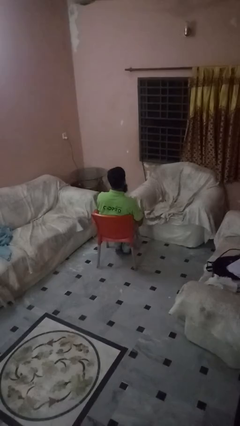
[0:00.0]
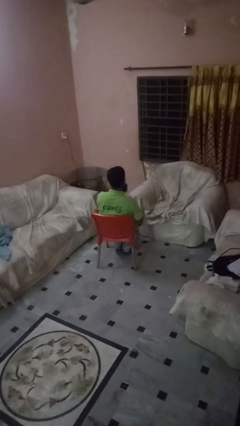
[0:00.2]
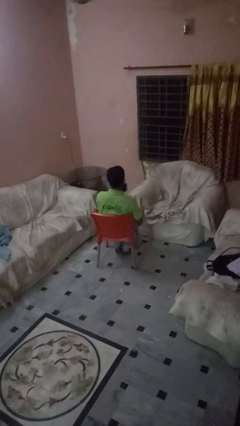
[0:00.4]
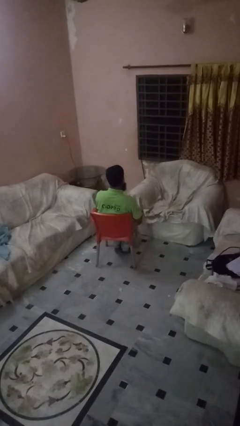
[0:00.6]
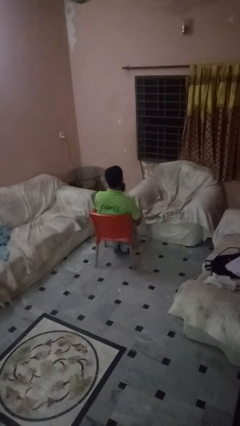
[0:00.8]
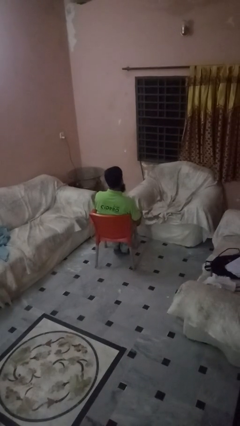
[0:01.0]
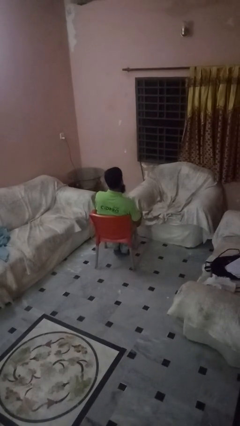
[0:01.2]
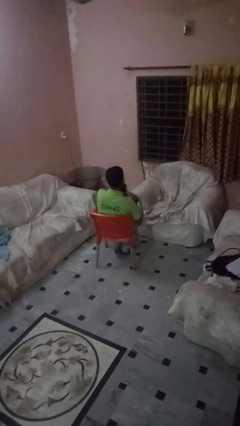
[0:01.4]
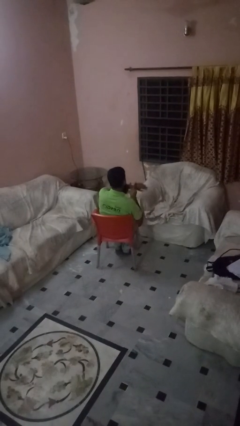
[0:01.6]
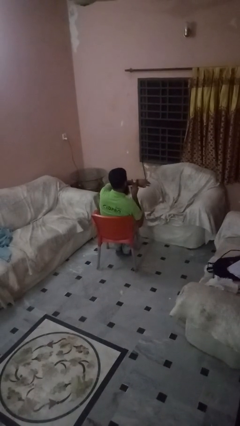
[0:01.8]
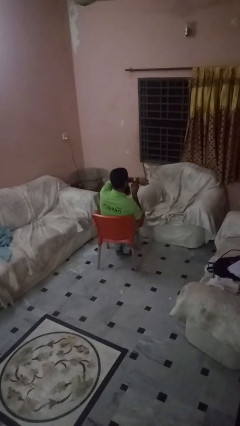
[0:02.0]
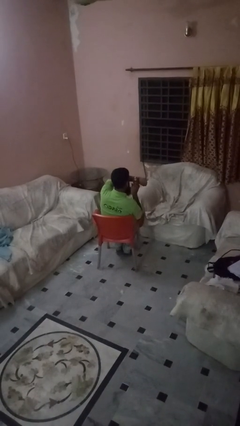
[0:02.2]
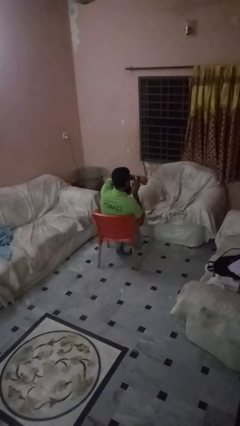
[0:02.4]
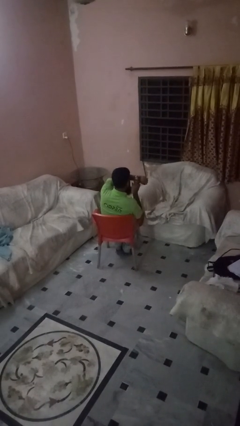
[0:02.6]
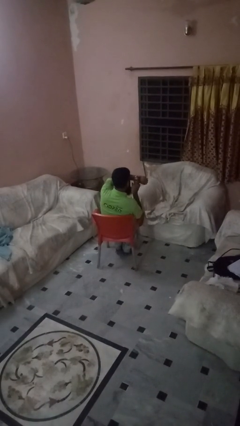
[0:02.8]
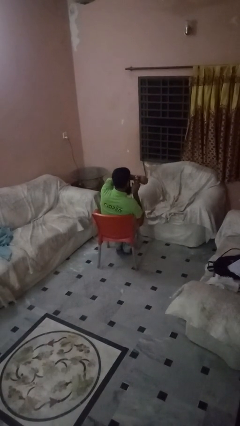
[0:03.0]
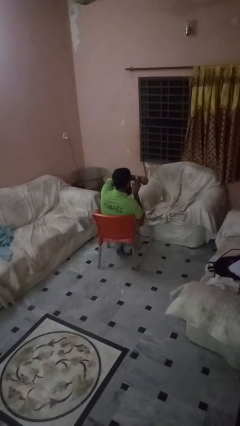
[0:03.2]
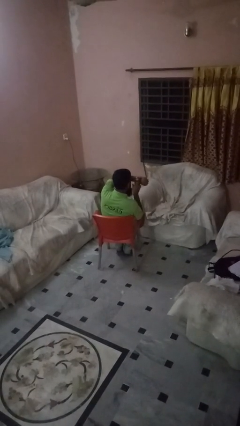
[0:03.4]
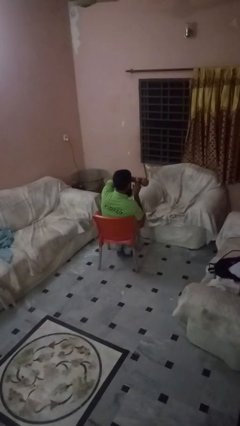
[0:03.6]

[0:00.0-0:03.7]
person gestures watch closely

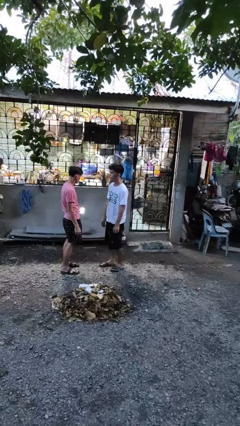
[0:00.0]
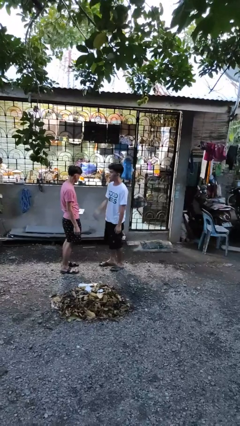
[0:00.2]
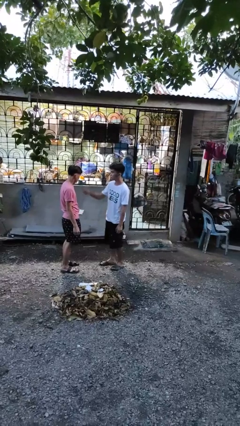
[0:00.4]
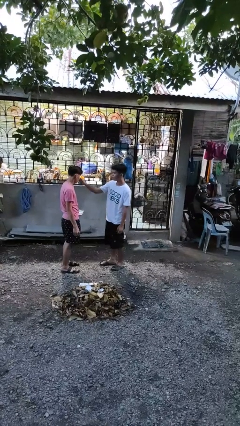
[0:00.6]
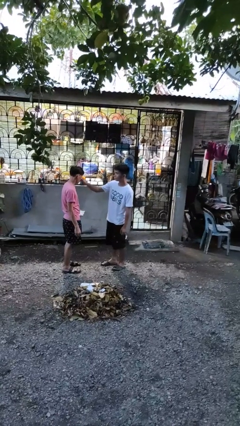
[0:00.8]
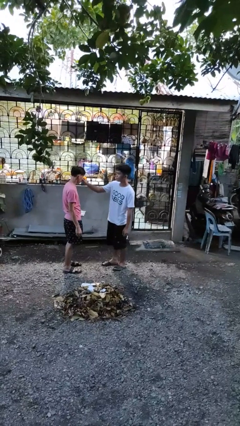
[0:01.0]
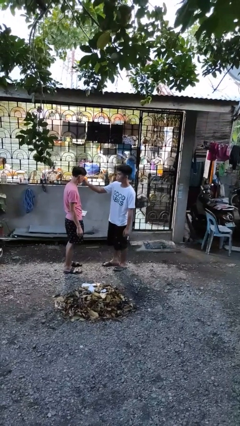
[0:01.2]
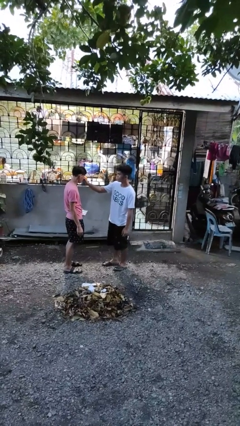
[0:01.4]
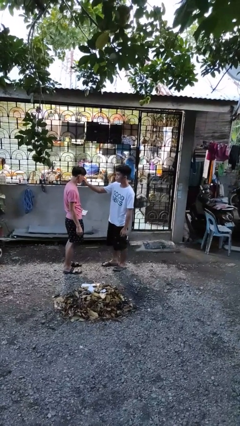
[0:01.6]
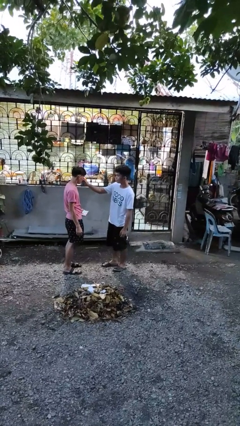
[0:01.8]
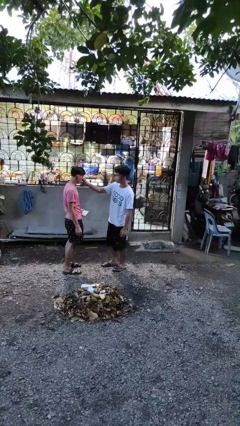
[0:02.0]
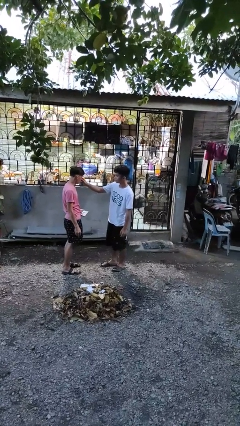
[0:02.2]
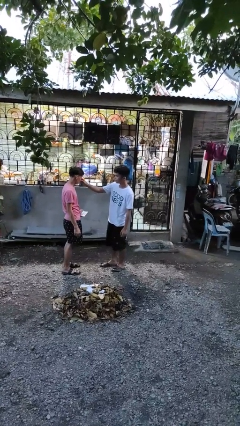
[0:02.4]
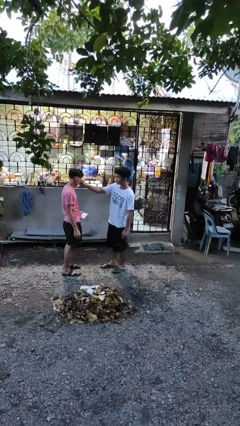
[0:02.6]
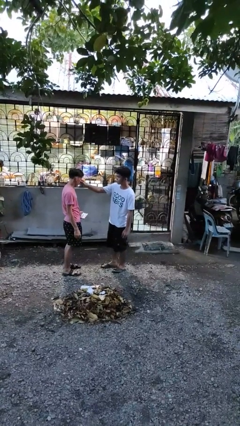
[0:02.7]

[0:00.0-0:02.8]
person touches face of person

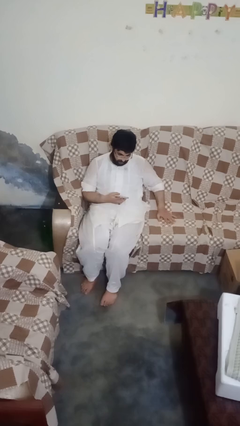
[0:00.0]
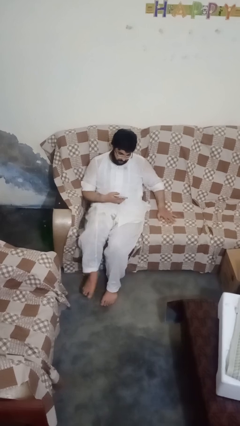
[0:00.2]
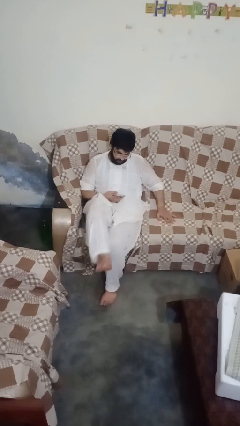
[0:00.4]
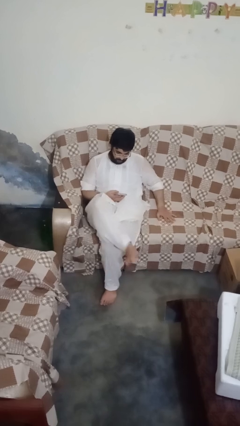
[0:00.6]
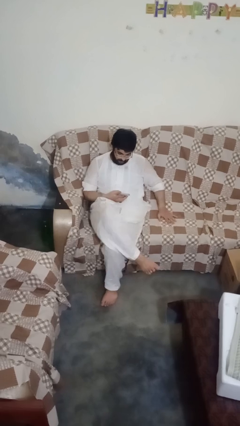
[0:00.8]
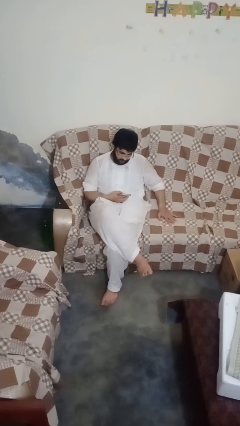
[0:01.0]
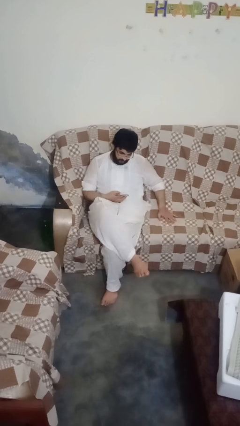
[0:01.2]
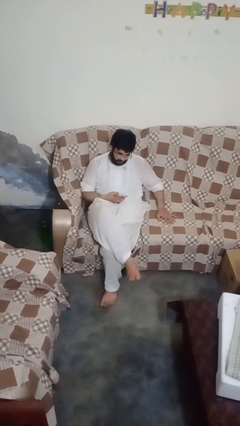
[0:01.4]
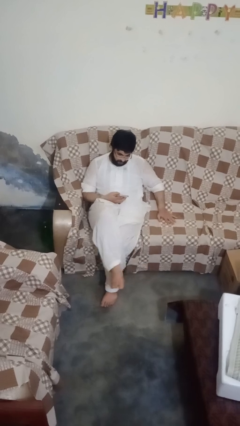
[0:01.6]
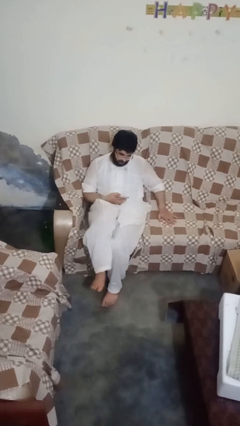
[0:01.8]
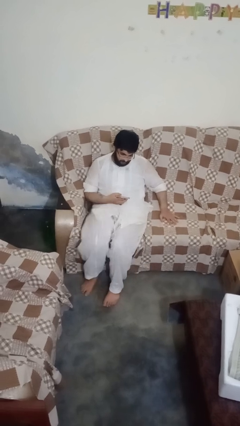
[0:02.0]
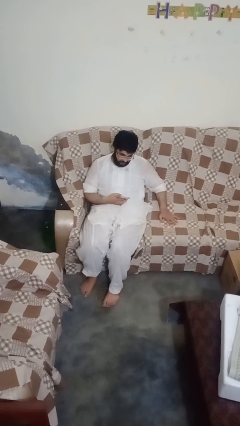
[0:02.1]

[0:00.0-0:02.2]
person crosses legs

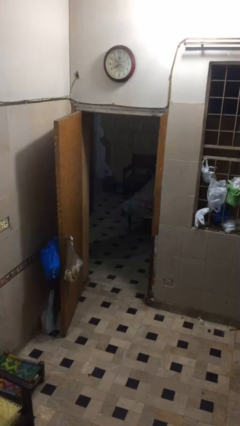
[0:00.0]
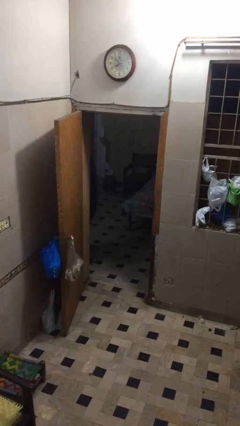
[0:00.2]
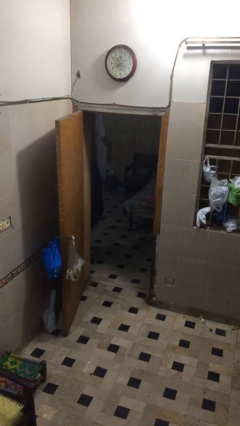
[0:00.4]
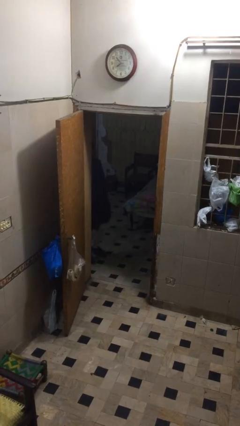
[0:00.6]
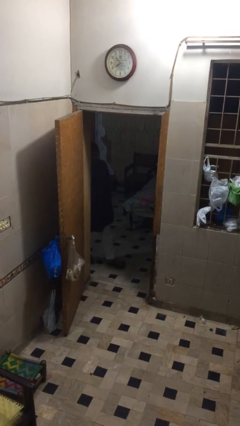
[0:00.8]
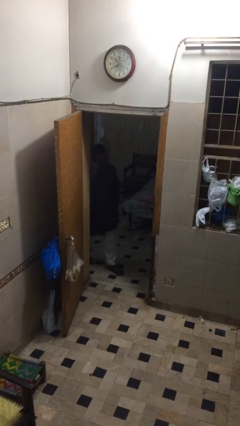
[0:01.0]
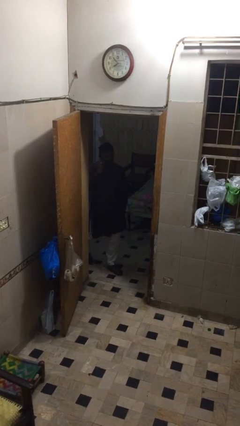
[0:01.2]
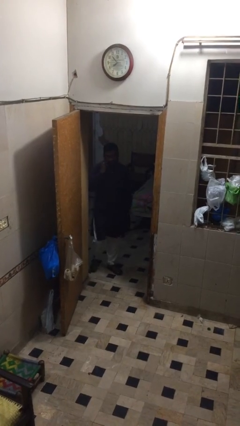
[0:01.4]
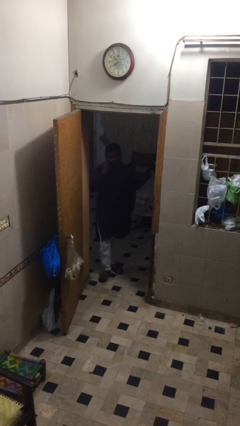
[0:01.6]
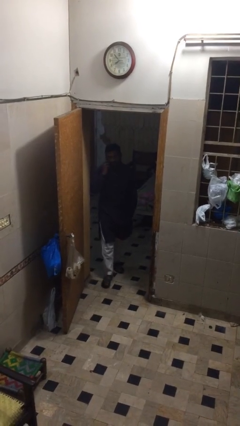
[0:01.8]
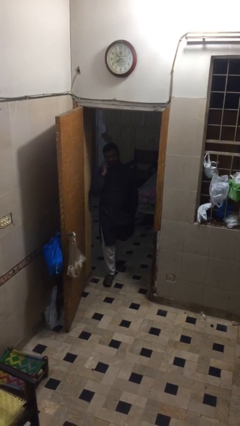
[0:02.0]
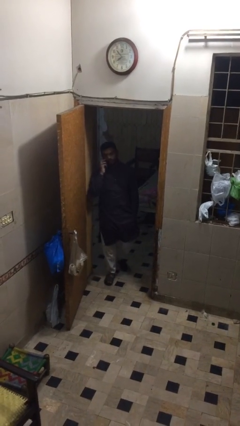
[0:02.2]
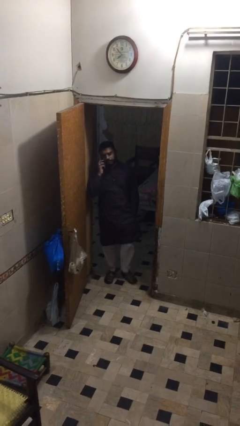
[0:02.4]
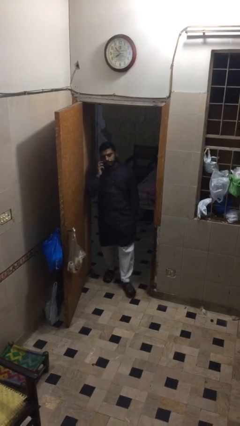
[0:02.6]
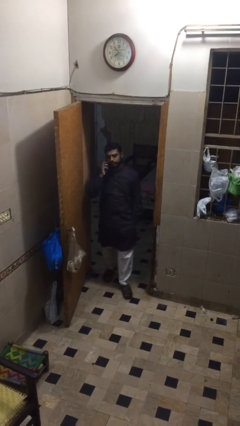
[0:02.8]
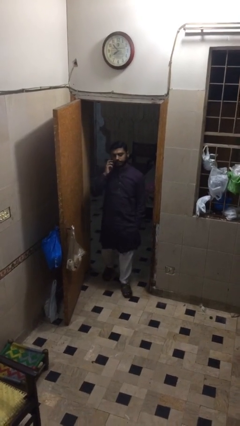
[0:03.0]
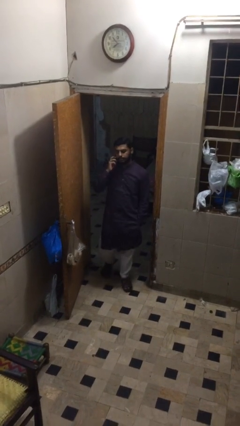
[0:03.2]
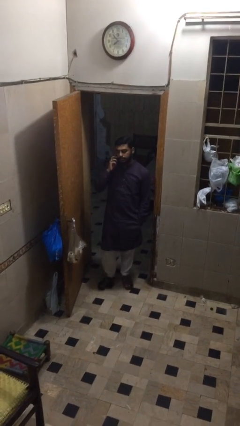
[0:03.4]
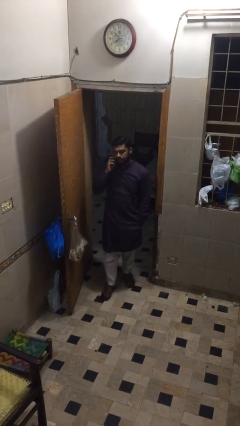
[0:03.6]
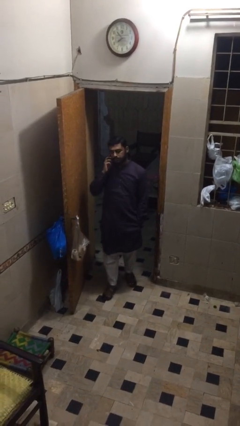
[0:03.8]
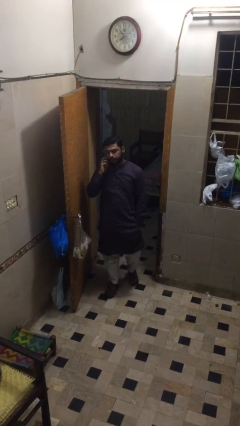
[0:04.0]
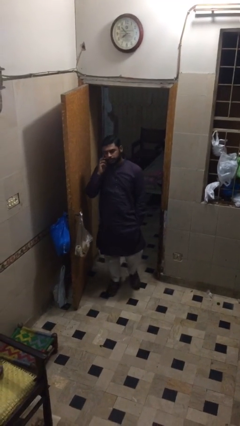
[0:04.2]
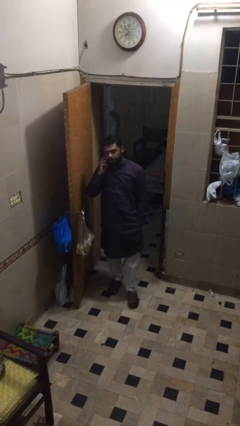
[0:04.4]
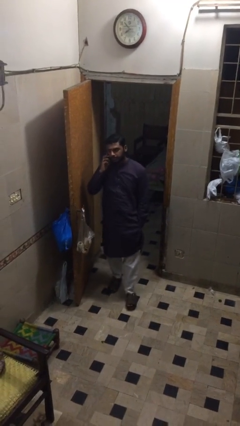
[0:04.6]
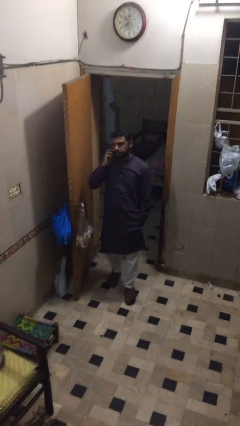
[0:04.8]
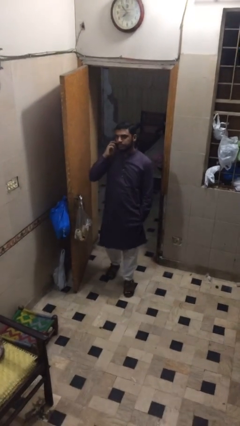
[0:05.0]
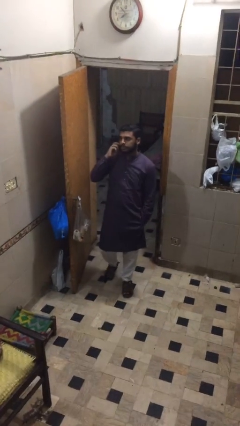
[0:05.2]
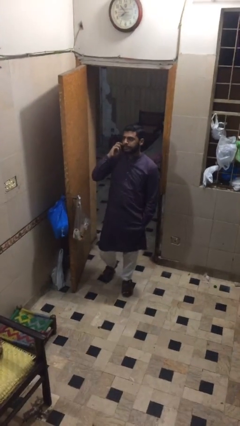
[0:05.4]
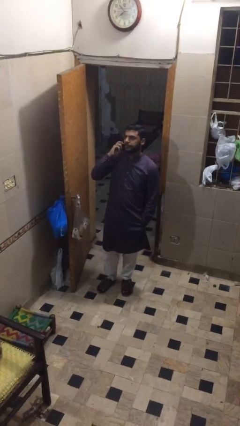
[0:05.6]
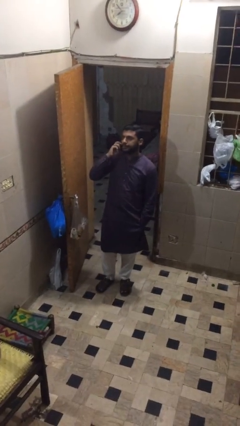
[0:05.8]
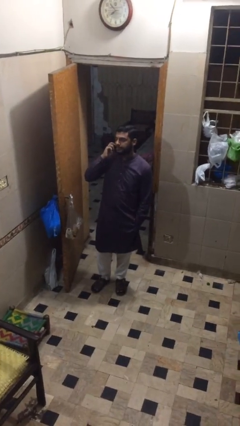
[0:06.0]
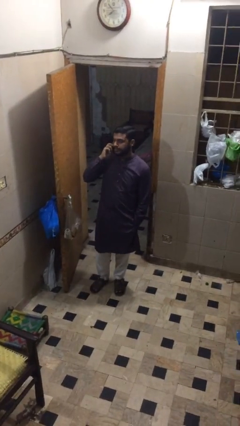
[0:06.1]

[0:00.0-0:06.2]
person enters scene through structure

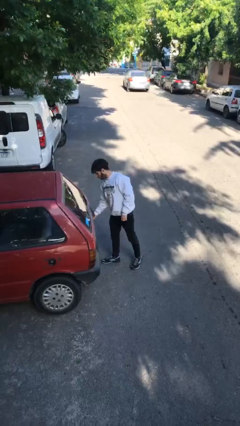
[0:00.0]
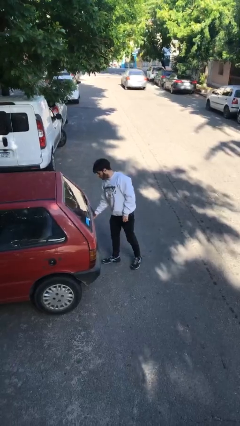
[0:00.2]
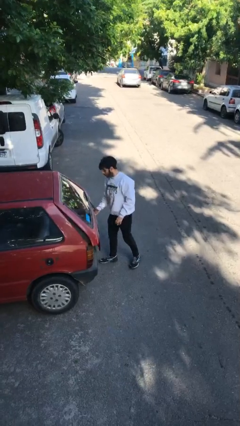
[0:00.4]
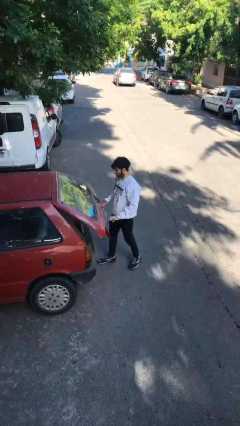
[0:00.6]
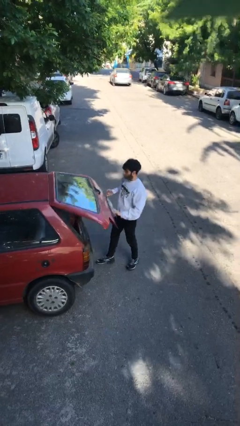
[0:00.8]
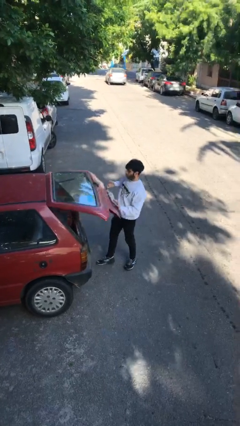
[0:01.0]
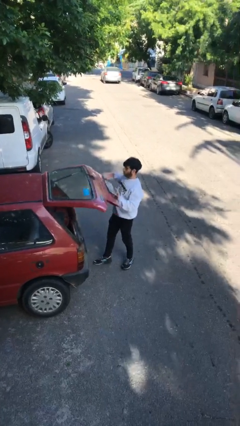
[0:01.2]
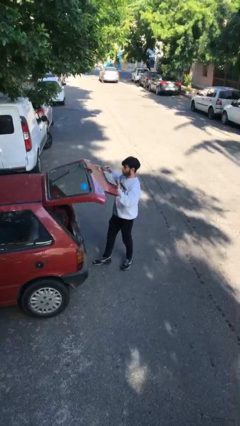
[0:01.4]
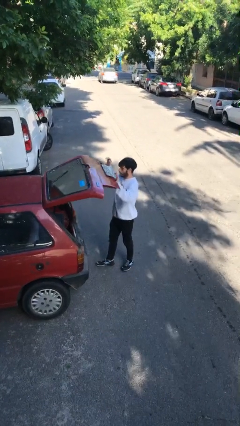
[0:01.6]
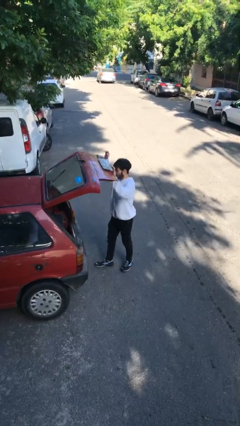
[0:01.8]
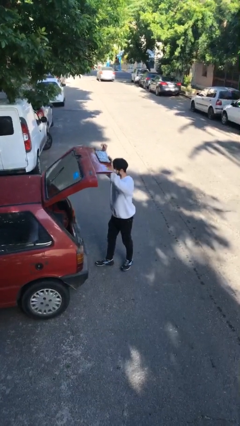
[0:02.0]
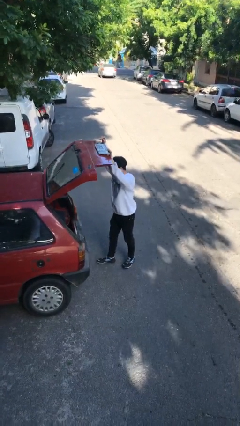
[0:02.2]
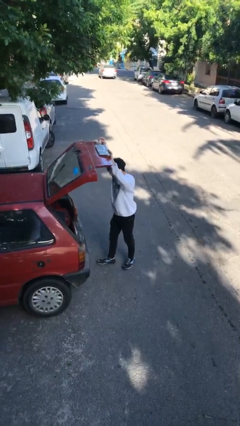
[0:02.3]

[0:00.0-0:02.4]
person opens car trunk

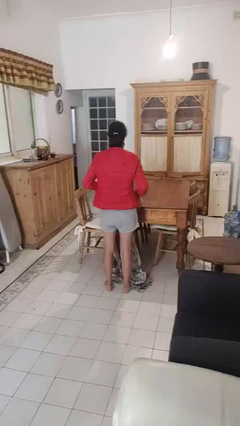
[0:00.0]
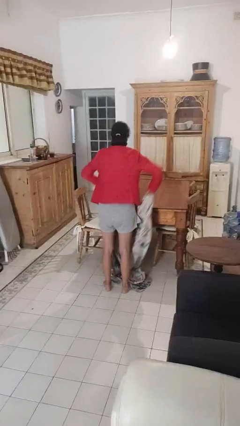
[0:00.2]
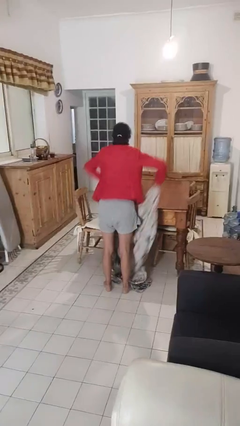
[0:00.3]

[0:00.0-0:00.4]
person spreads tablecloth
